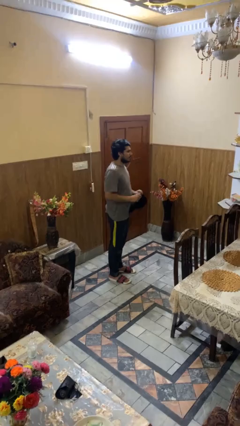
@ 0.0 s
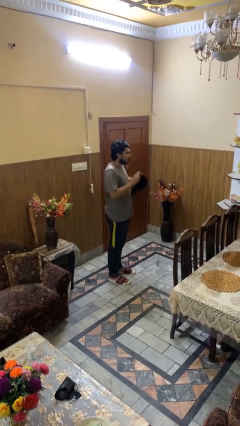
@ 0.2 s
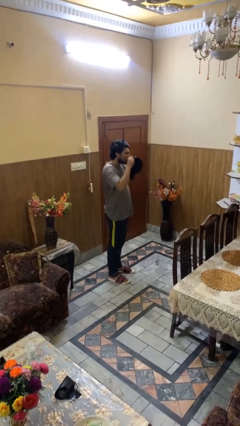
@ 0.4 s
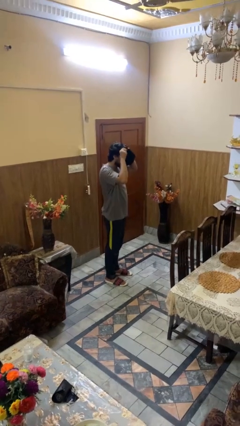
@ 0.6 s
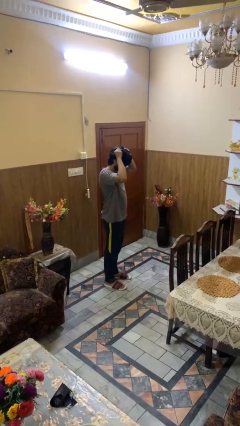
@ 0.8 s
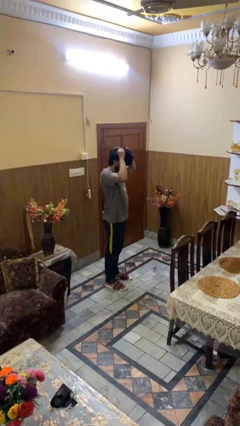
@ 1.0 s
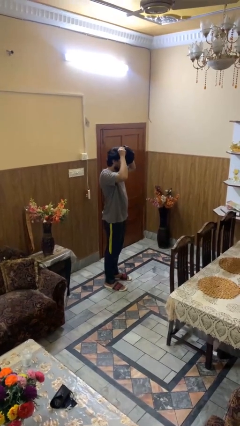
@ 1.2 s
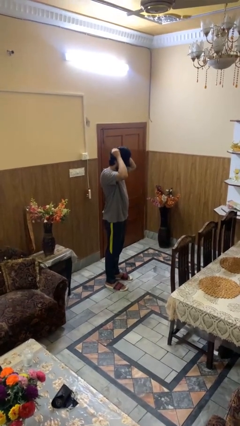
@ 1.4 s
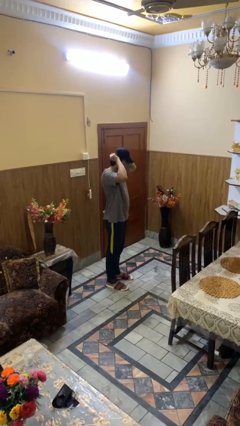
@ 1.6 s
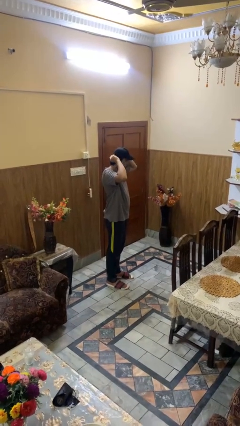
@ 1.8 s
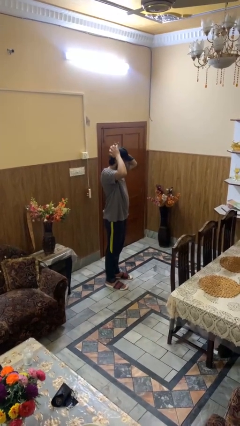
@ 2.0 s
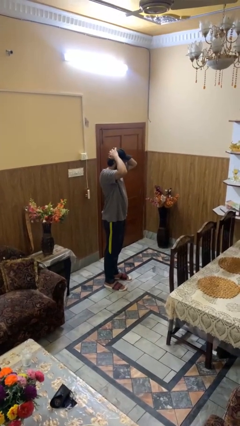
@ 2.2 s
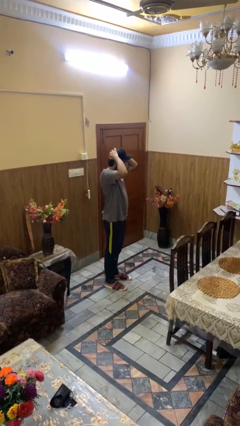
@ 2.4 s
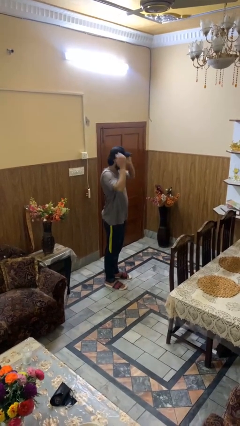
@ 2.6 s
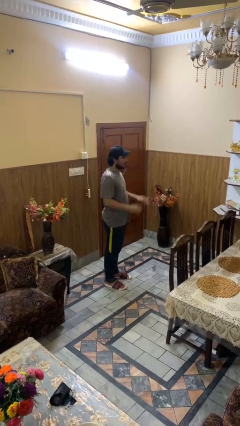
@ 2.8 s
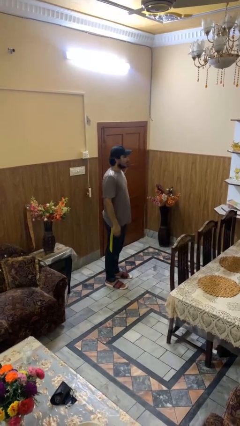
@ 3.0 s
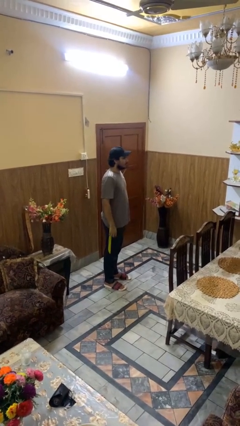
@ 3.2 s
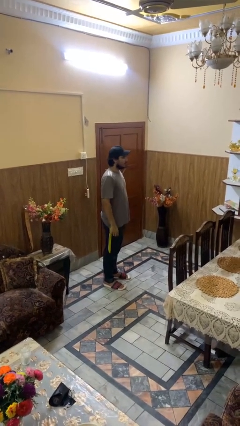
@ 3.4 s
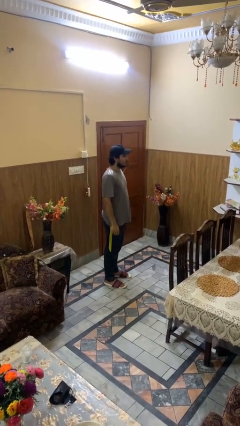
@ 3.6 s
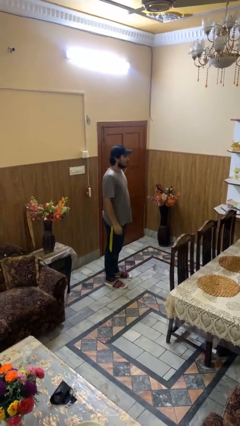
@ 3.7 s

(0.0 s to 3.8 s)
person puts on hat

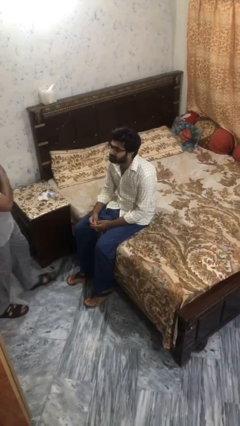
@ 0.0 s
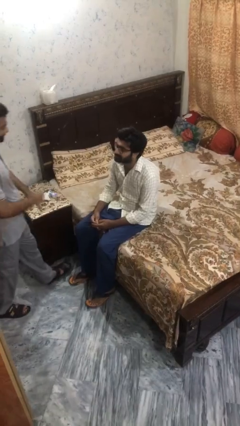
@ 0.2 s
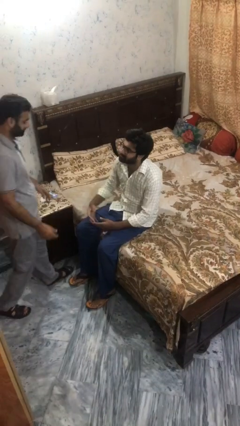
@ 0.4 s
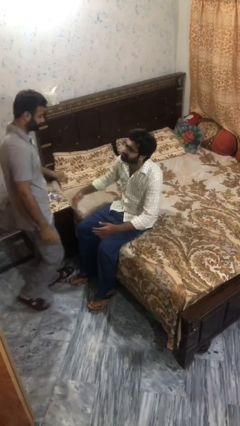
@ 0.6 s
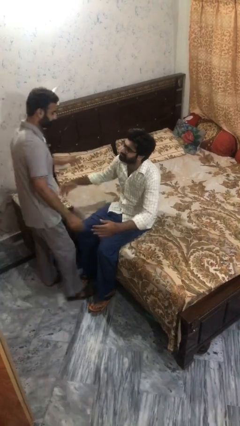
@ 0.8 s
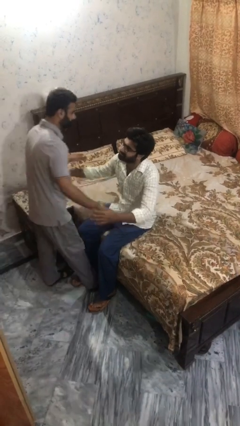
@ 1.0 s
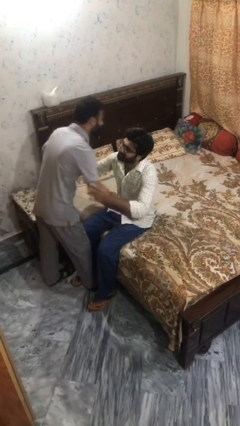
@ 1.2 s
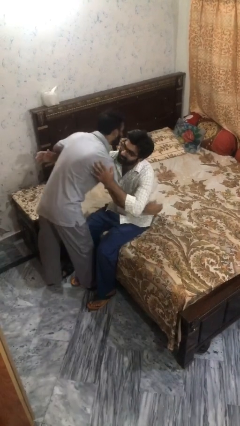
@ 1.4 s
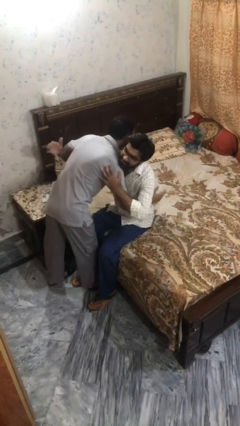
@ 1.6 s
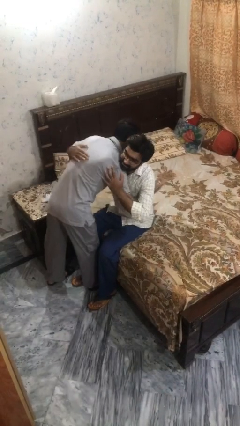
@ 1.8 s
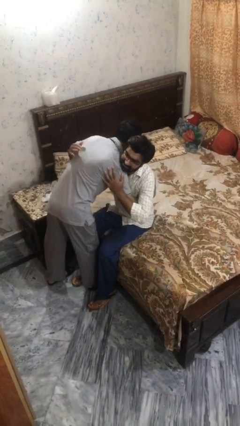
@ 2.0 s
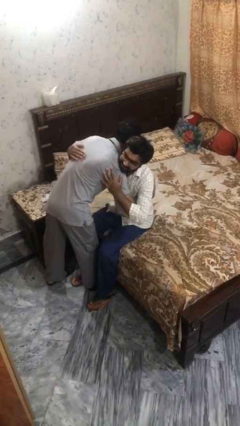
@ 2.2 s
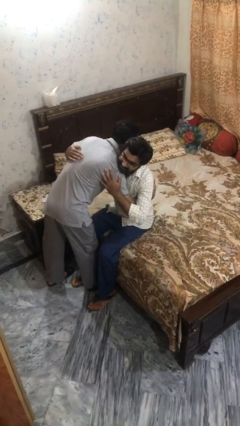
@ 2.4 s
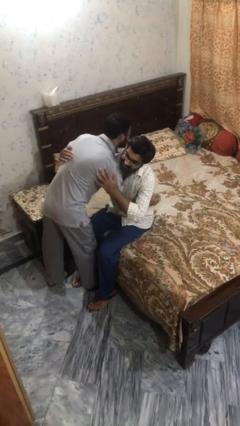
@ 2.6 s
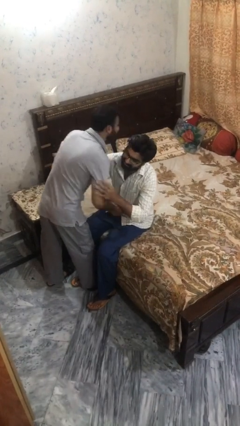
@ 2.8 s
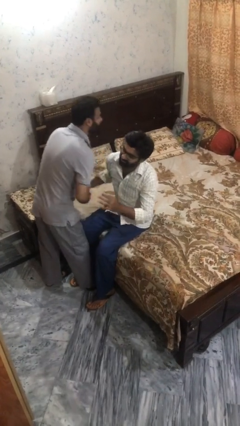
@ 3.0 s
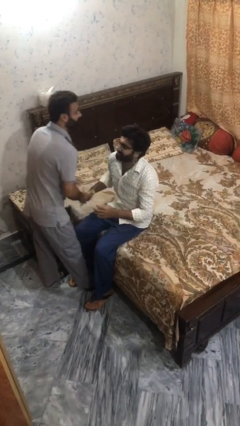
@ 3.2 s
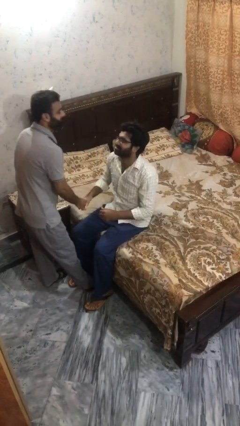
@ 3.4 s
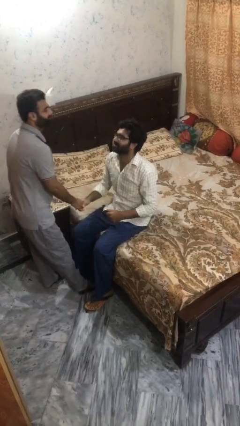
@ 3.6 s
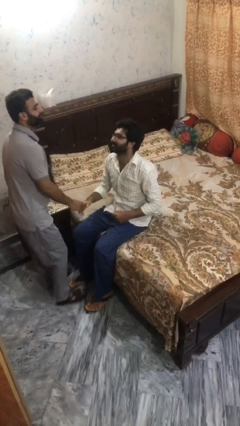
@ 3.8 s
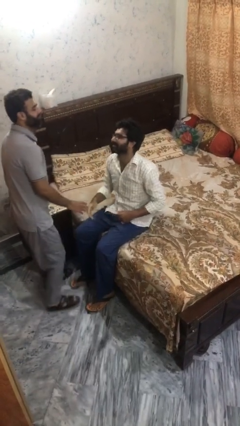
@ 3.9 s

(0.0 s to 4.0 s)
person embraces person

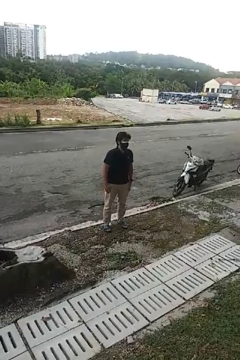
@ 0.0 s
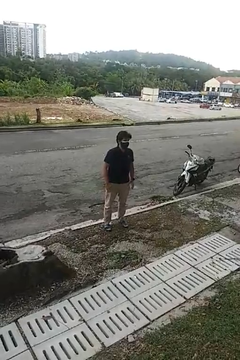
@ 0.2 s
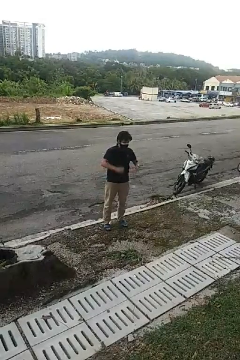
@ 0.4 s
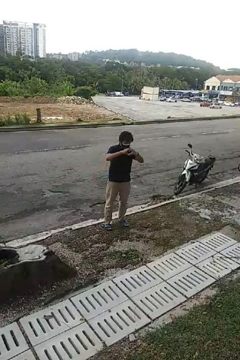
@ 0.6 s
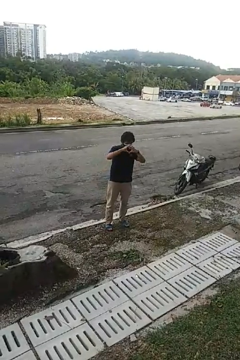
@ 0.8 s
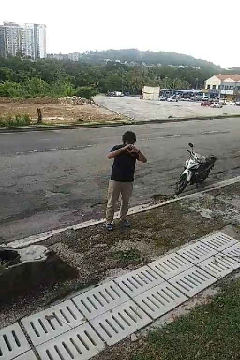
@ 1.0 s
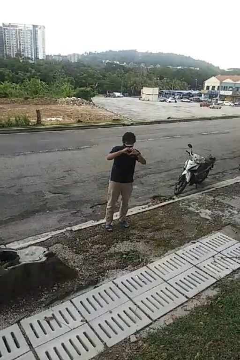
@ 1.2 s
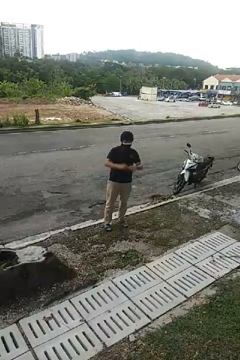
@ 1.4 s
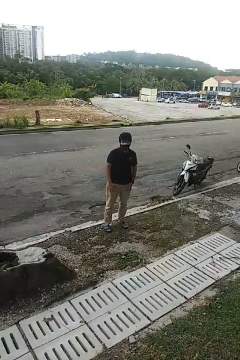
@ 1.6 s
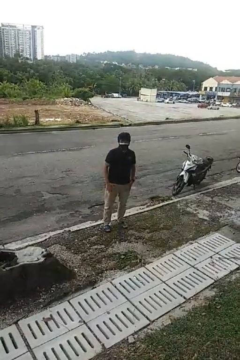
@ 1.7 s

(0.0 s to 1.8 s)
person gestures heart

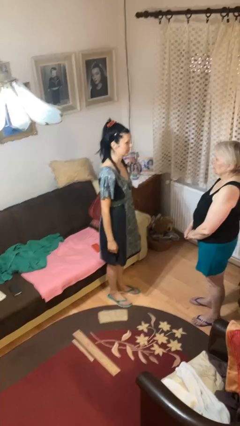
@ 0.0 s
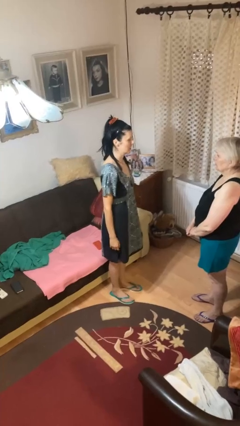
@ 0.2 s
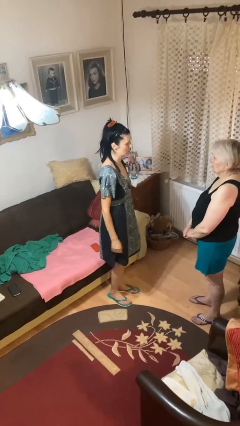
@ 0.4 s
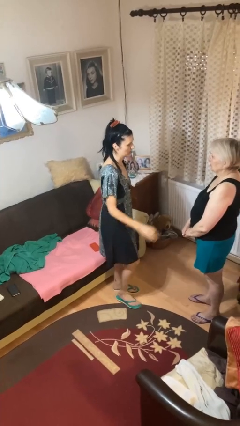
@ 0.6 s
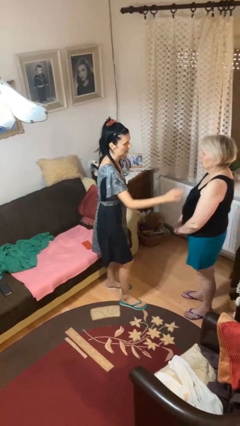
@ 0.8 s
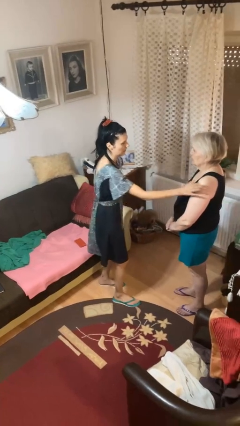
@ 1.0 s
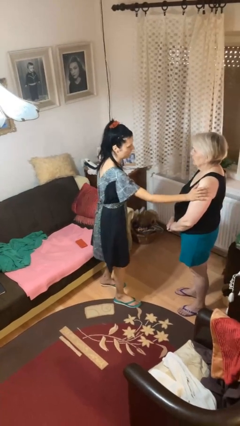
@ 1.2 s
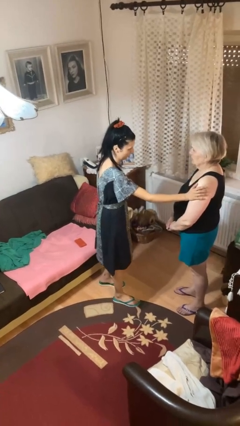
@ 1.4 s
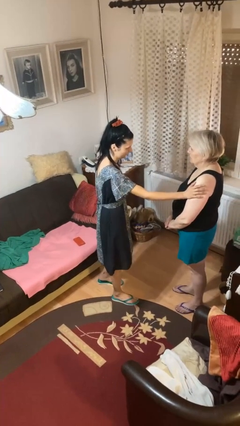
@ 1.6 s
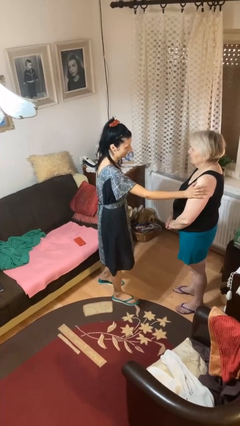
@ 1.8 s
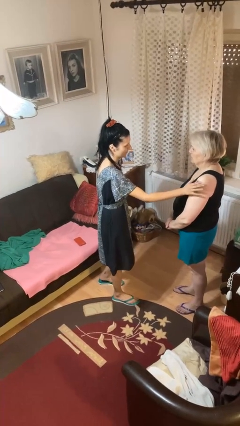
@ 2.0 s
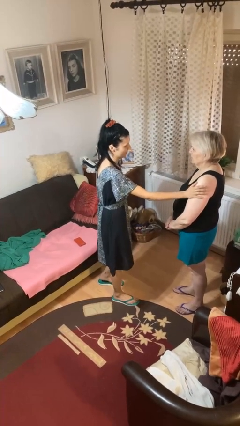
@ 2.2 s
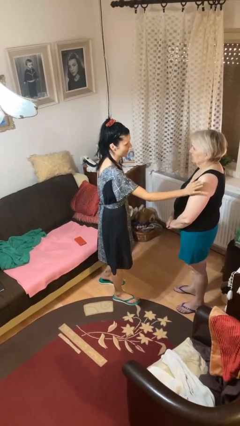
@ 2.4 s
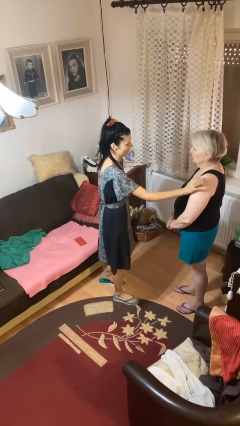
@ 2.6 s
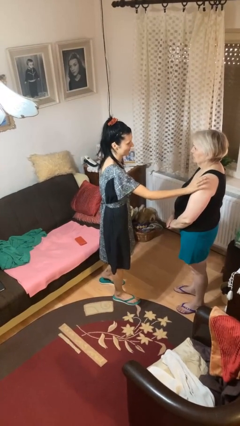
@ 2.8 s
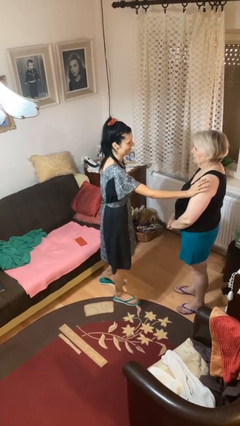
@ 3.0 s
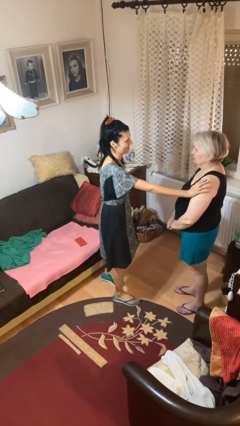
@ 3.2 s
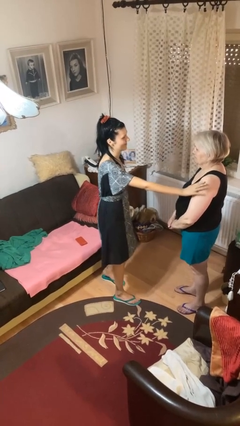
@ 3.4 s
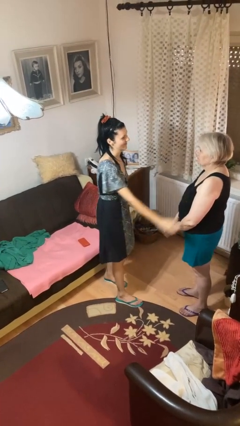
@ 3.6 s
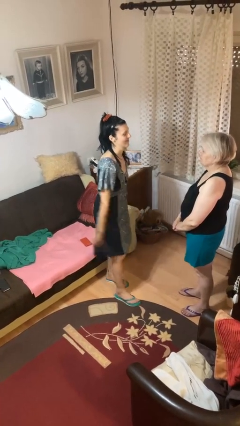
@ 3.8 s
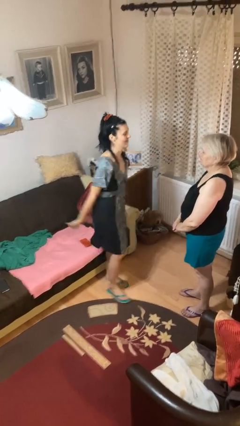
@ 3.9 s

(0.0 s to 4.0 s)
person pounds shoulders of person

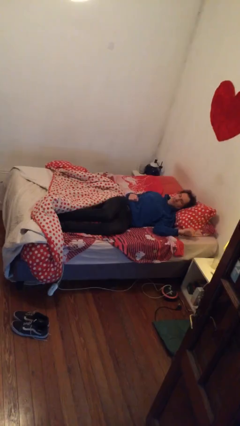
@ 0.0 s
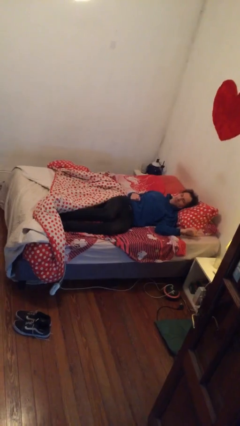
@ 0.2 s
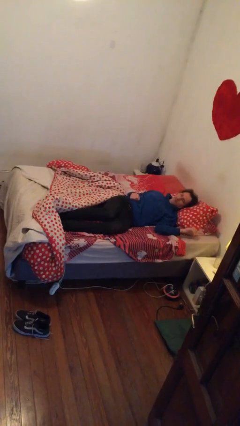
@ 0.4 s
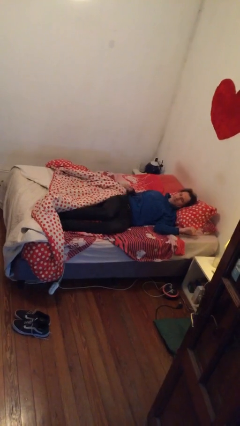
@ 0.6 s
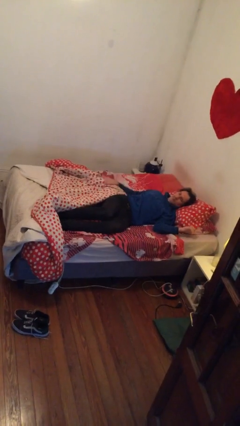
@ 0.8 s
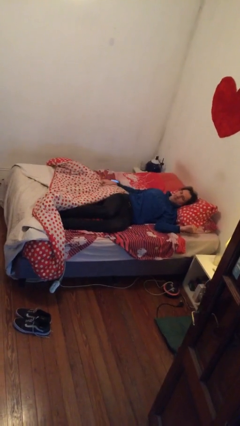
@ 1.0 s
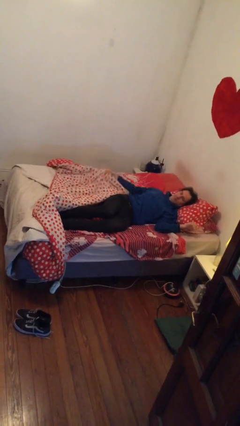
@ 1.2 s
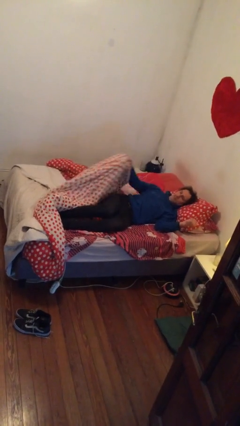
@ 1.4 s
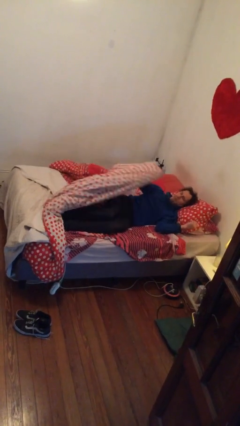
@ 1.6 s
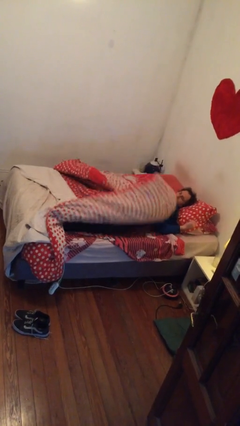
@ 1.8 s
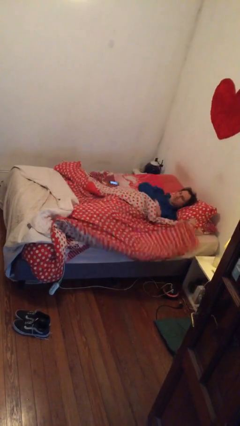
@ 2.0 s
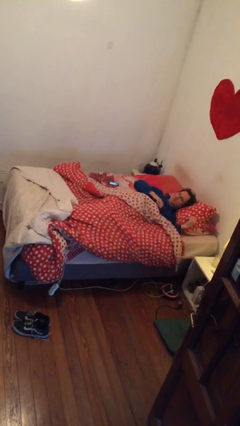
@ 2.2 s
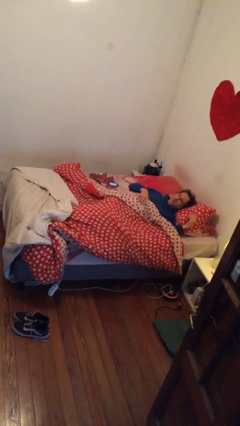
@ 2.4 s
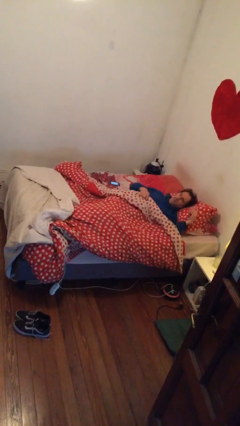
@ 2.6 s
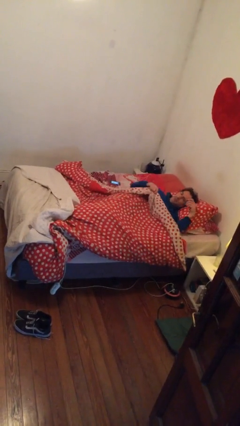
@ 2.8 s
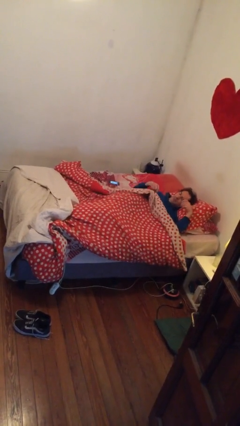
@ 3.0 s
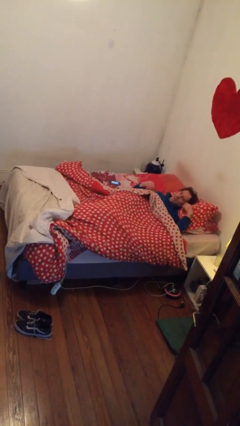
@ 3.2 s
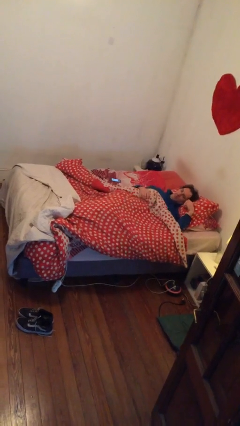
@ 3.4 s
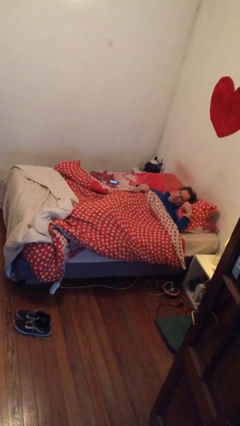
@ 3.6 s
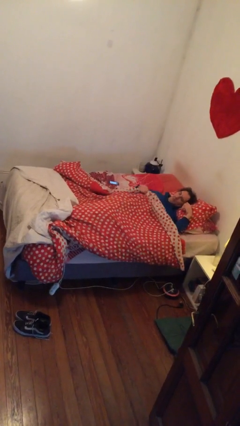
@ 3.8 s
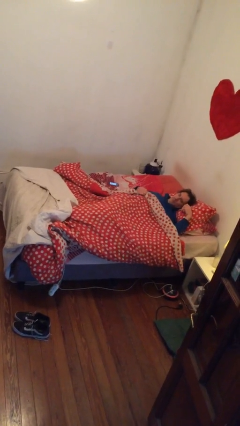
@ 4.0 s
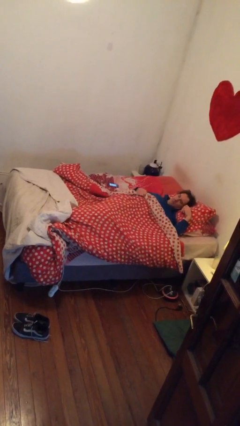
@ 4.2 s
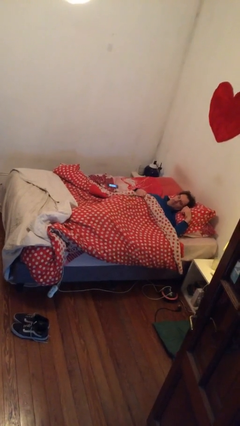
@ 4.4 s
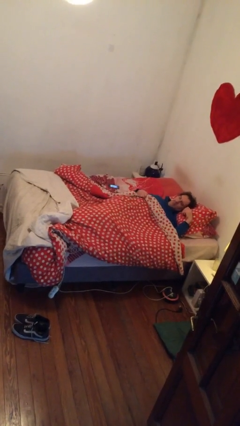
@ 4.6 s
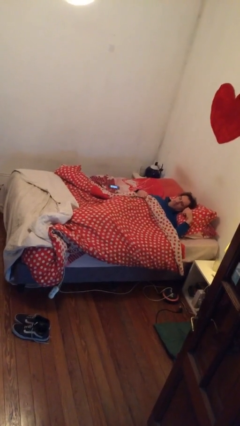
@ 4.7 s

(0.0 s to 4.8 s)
person covers with bedsheets
